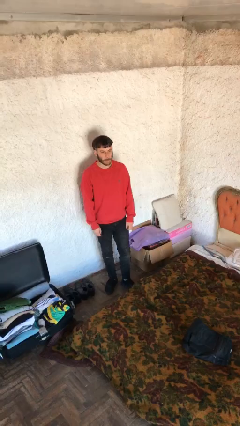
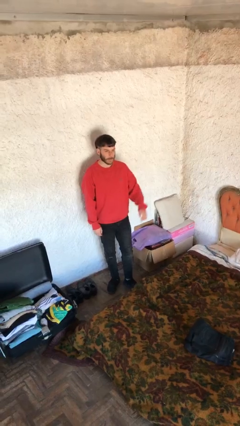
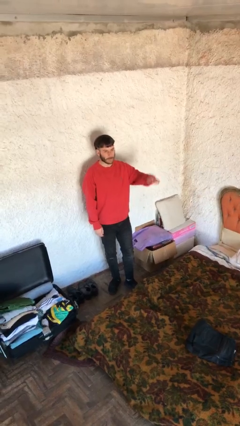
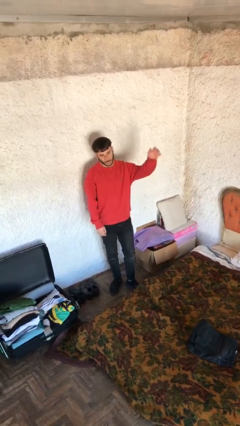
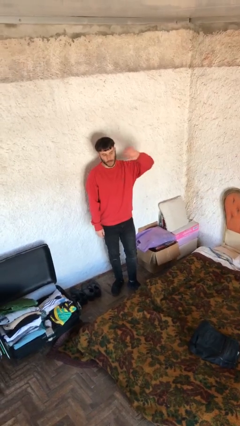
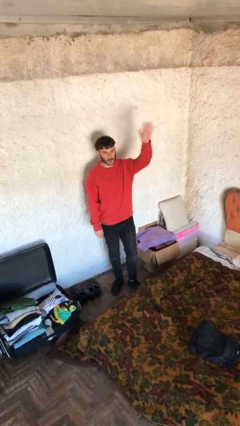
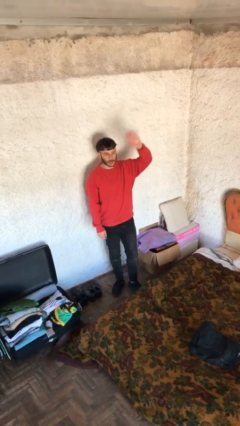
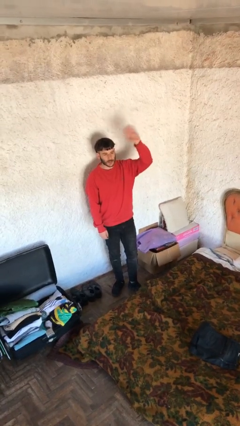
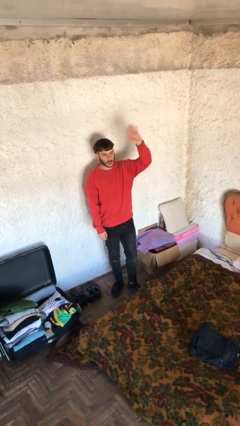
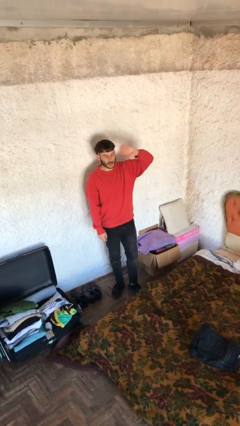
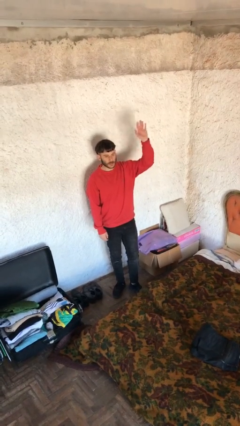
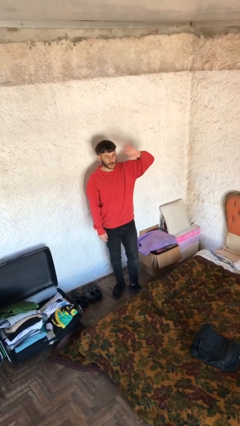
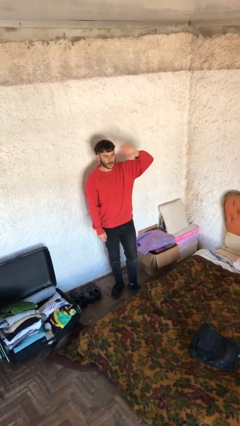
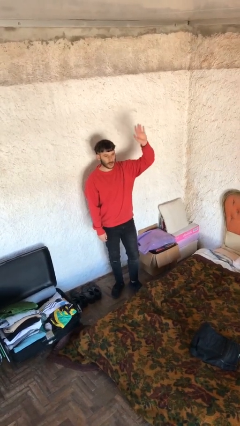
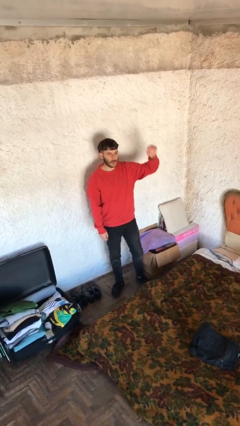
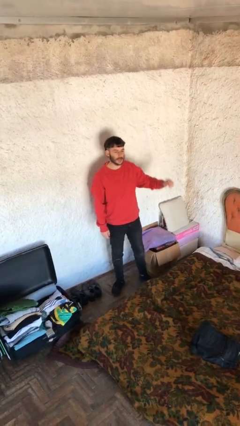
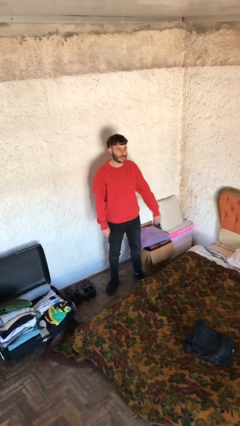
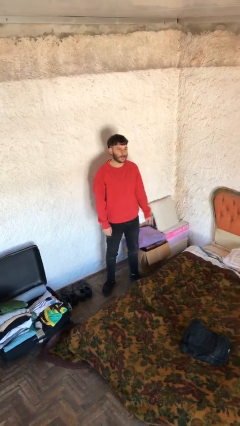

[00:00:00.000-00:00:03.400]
person waves at person

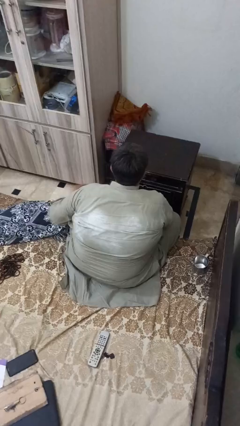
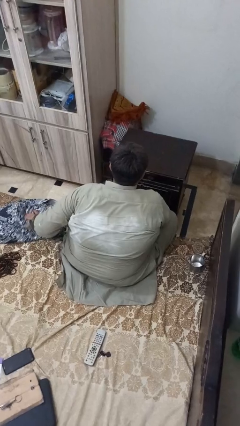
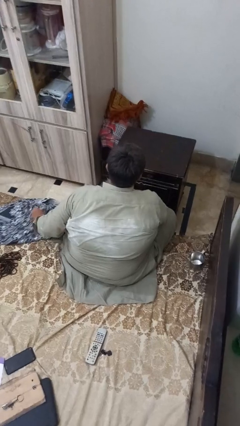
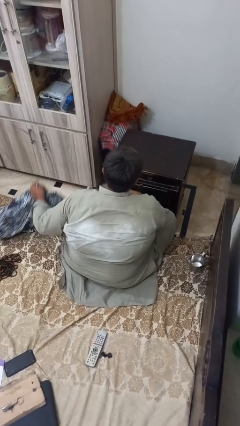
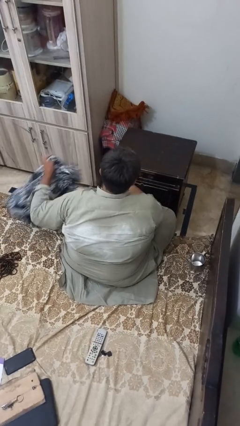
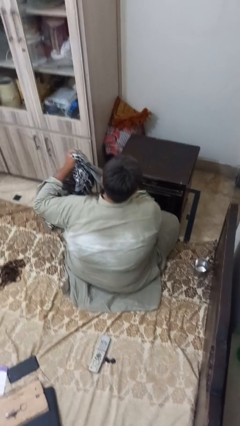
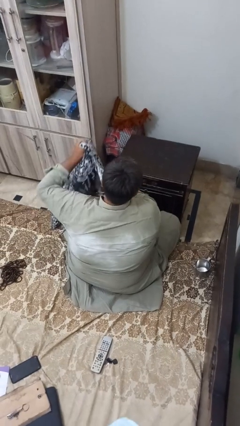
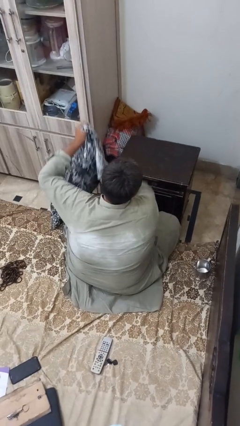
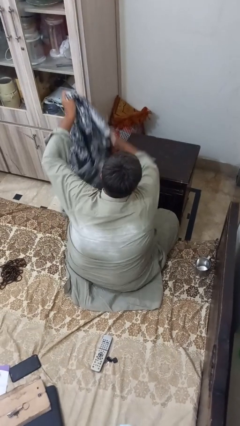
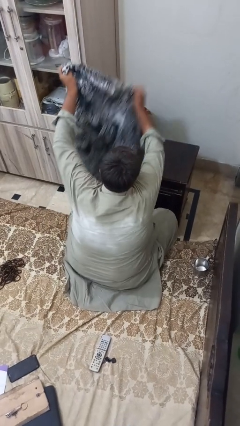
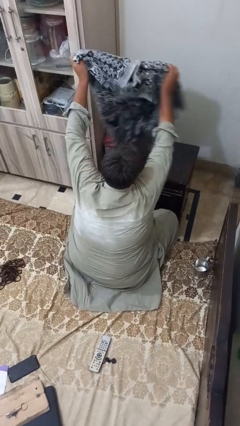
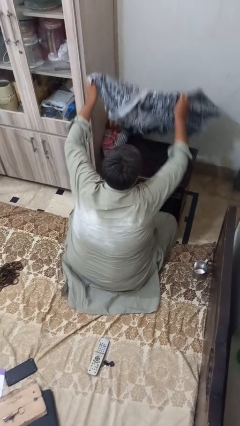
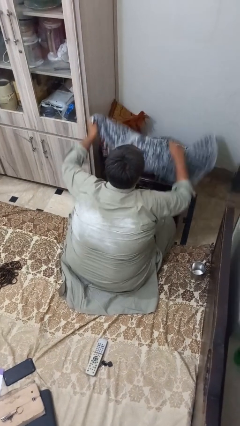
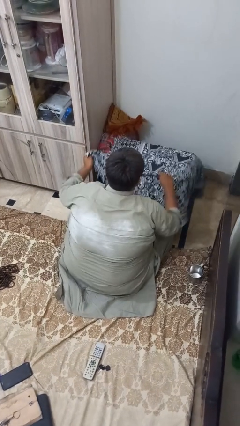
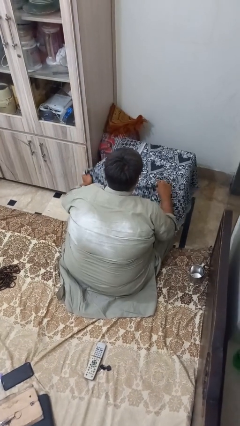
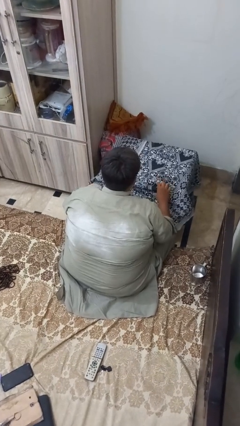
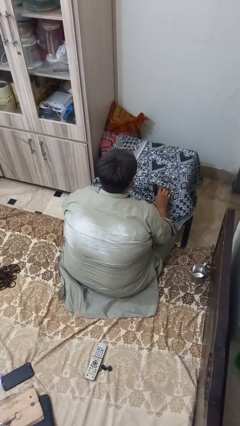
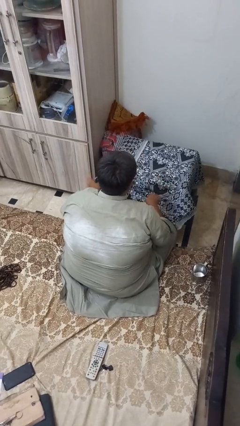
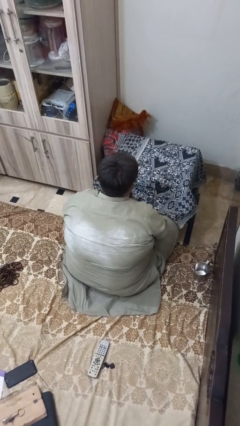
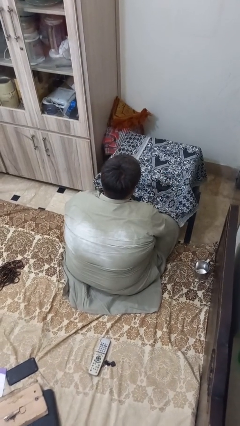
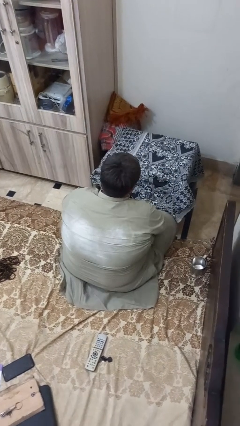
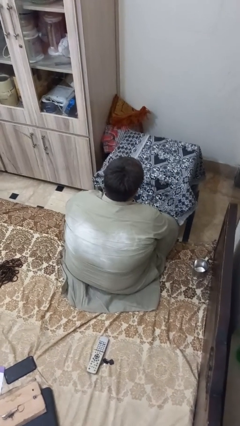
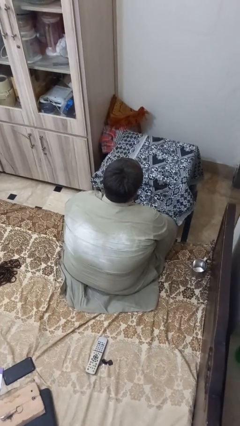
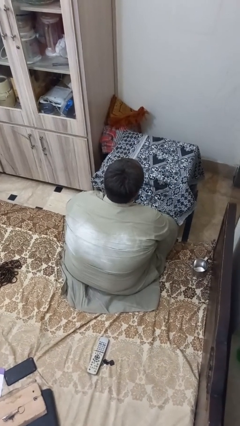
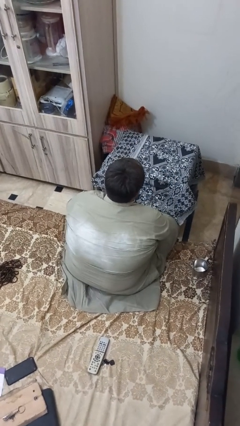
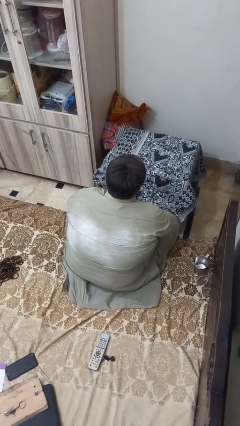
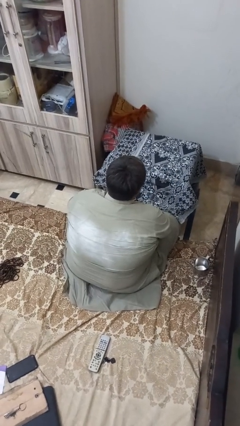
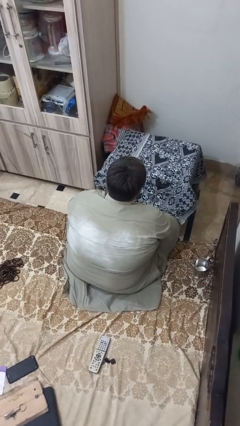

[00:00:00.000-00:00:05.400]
person spreads tablecloth

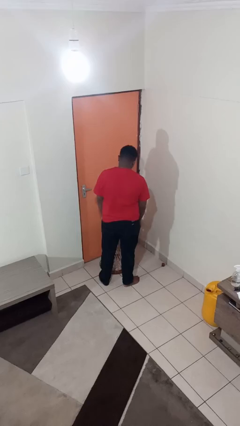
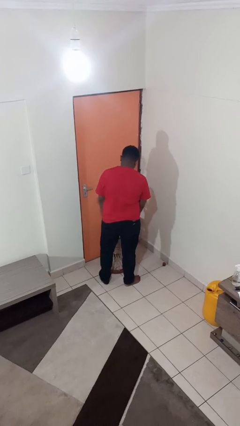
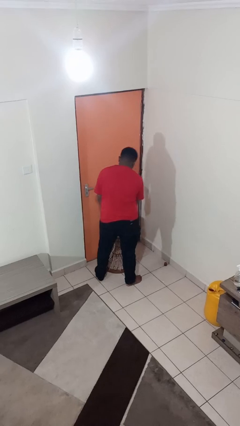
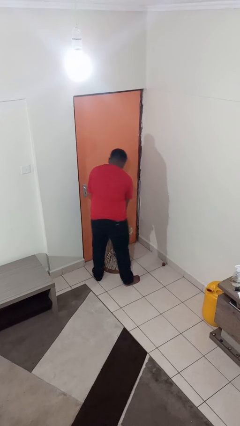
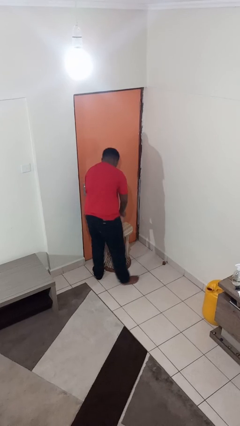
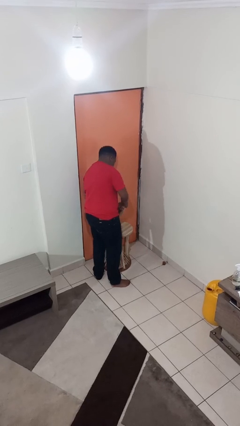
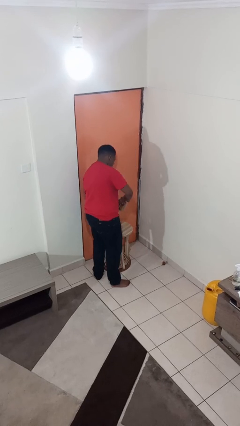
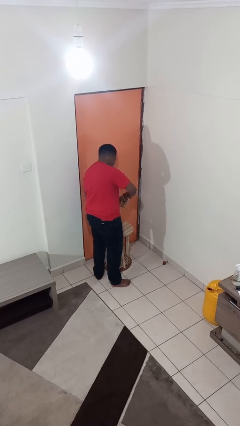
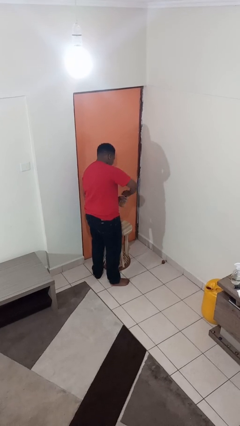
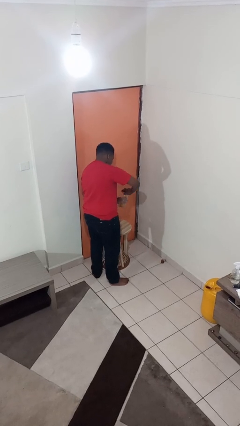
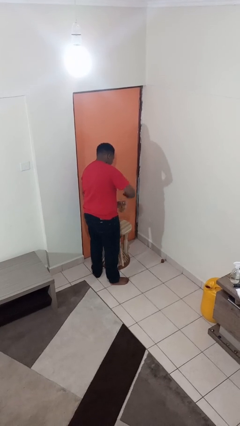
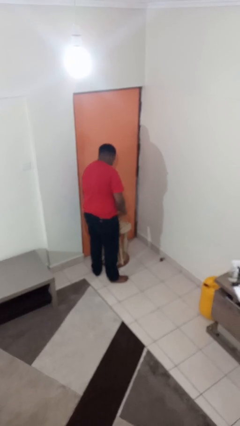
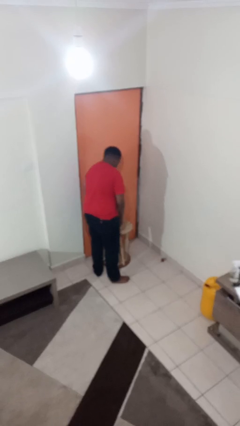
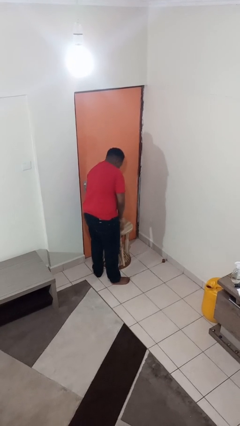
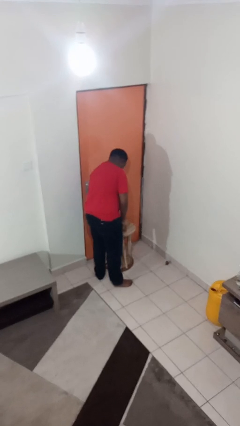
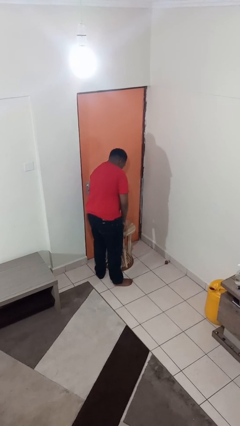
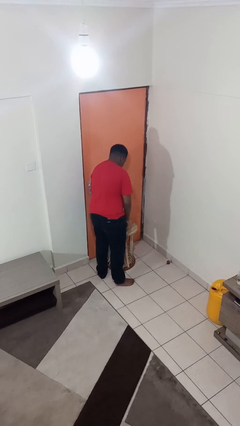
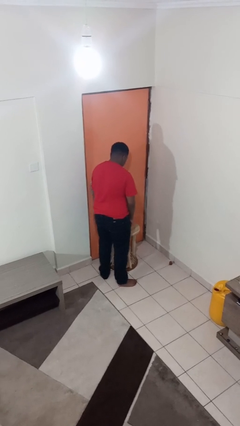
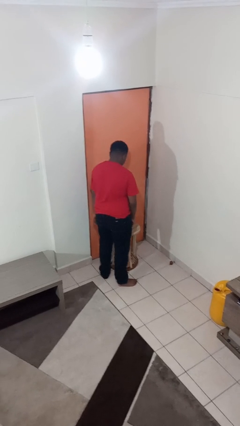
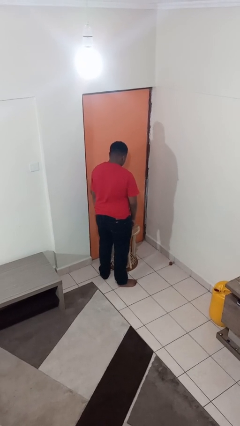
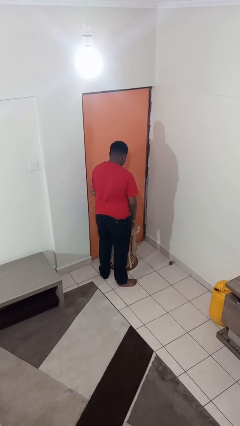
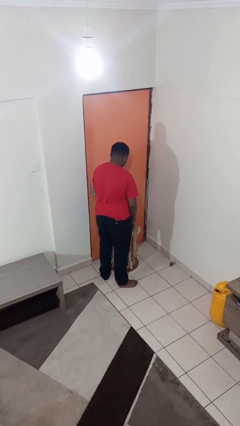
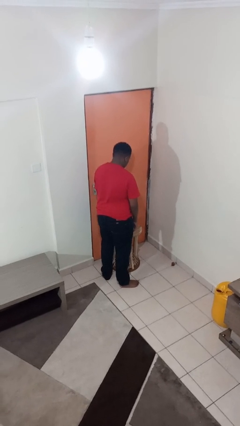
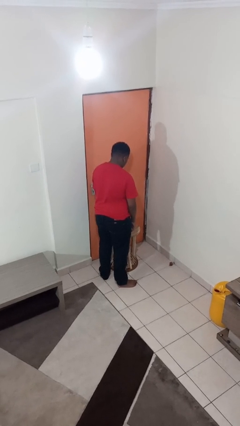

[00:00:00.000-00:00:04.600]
person opens jar

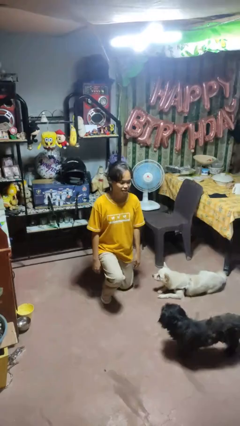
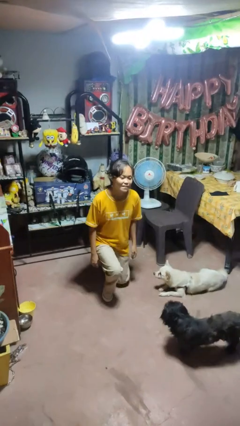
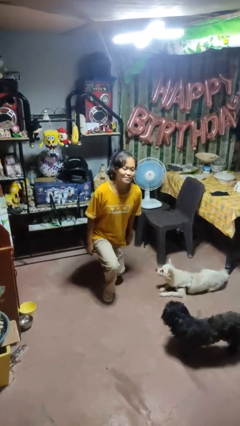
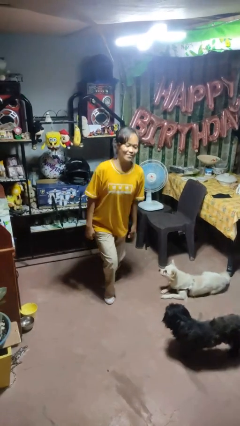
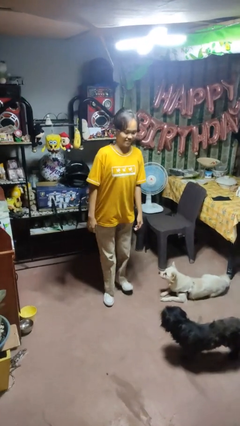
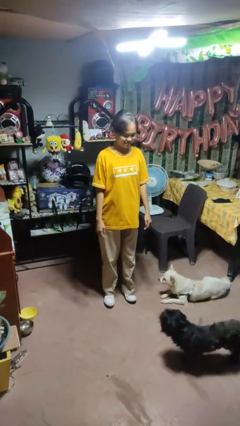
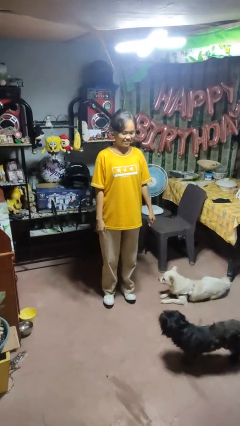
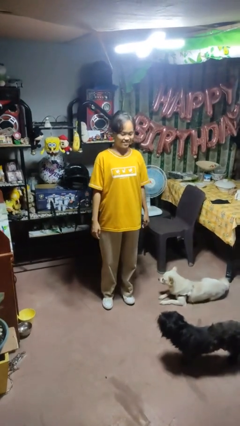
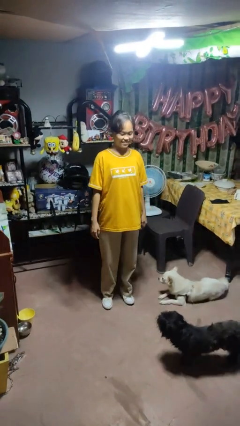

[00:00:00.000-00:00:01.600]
person stands up from floor

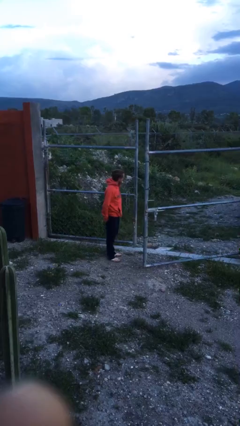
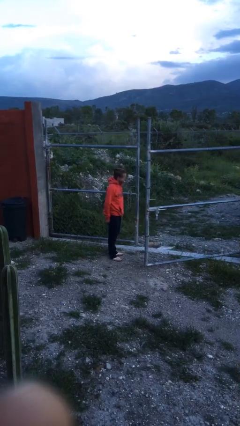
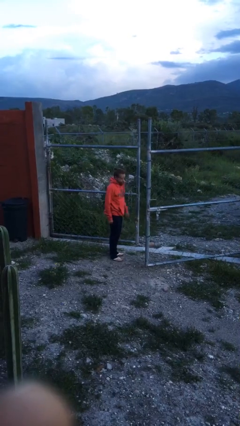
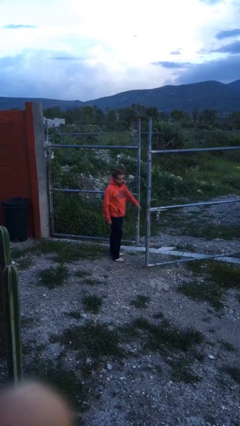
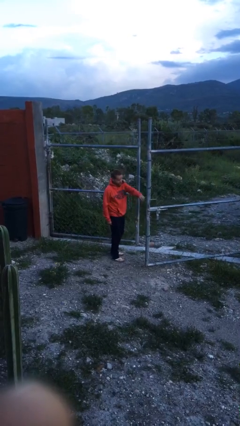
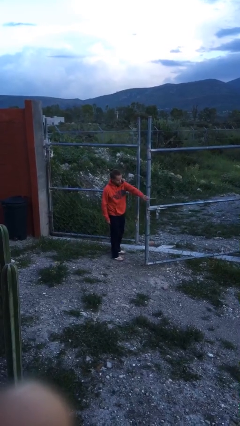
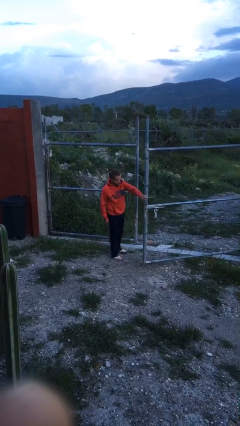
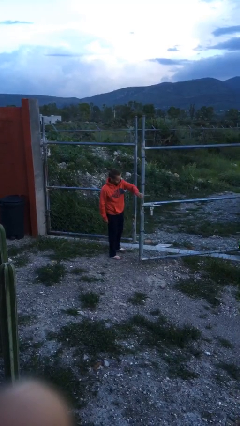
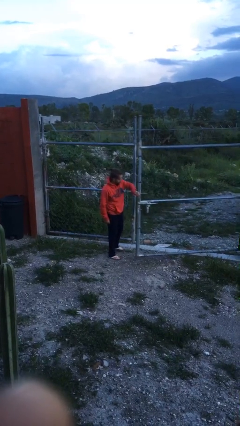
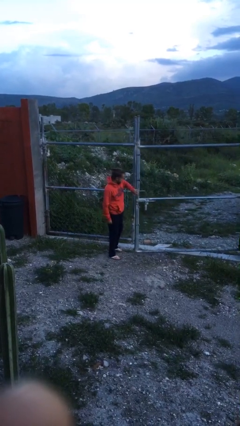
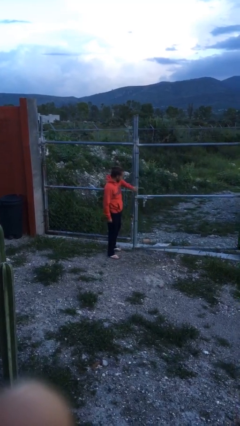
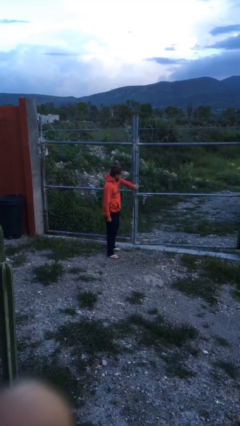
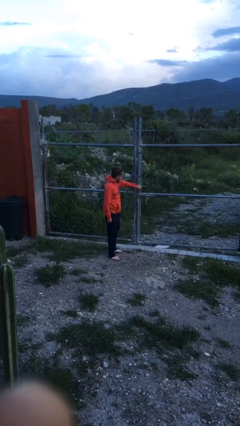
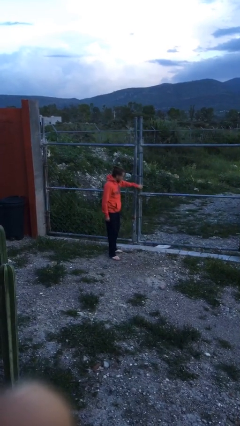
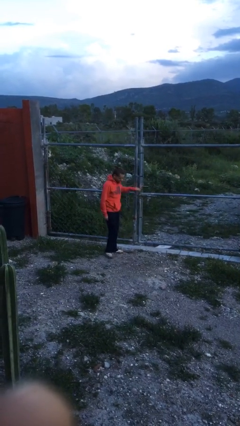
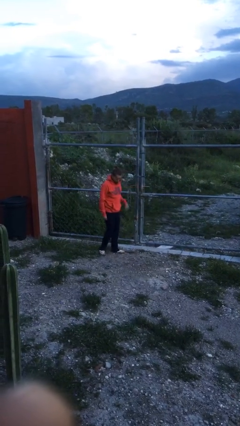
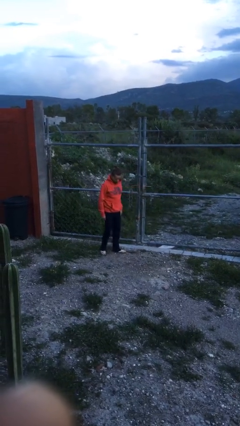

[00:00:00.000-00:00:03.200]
person closes gate
